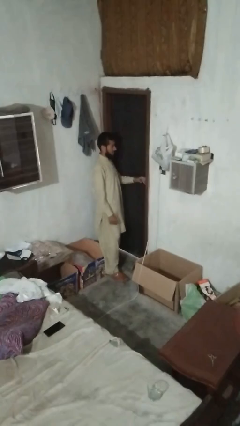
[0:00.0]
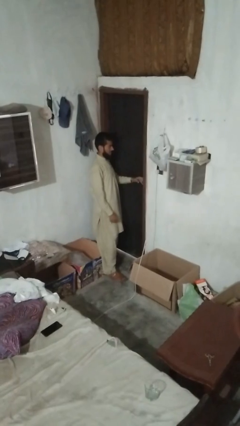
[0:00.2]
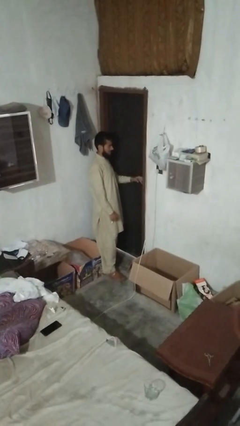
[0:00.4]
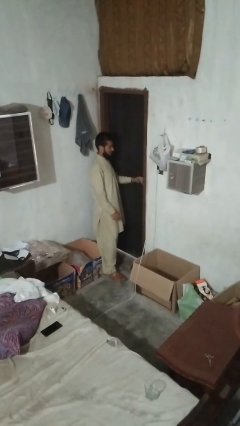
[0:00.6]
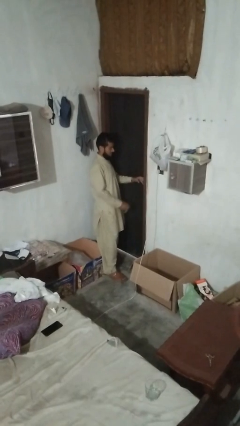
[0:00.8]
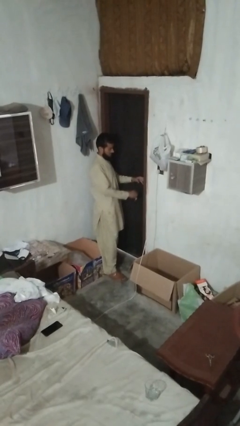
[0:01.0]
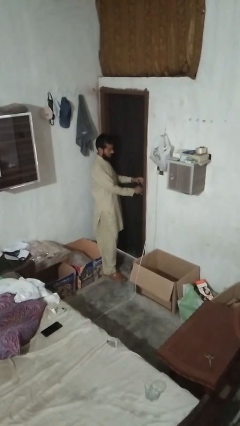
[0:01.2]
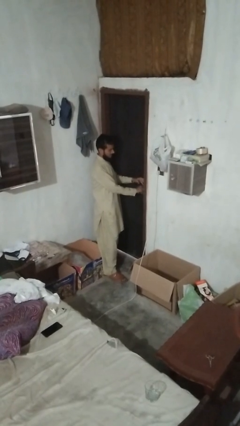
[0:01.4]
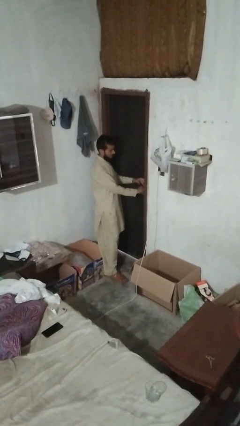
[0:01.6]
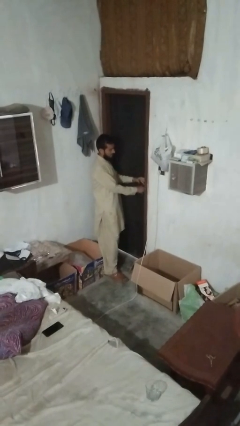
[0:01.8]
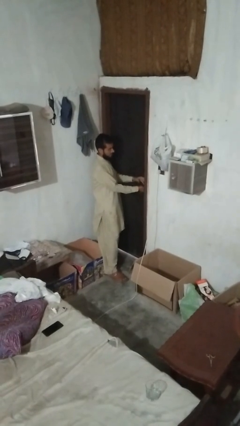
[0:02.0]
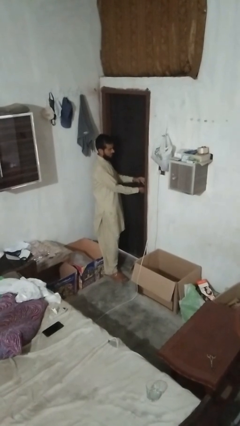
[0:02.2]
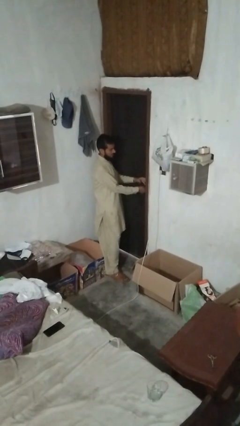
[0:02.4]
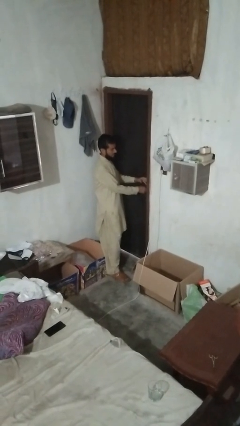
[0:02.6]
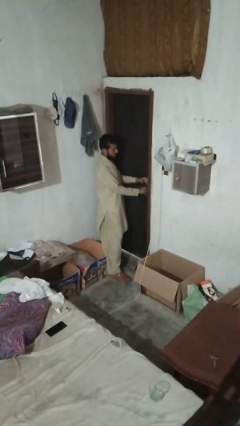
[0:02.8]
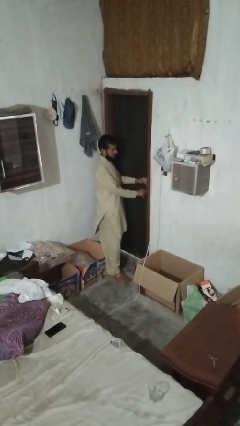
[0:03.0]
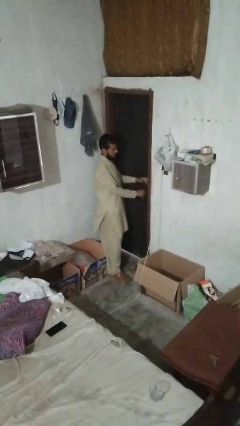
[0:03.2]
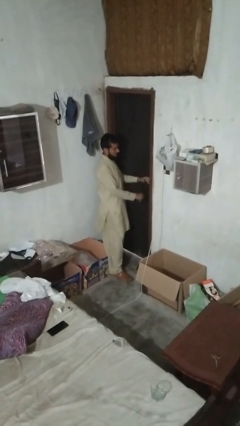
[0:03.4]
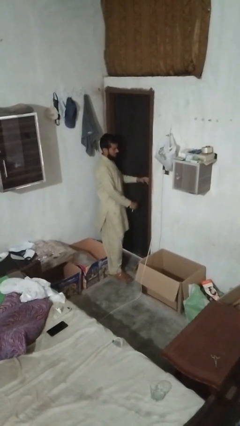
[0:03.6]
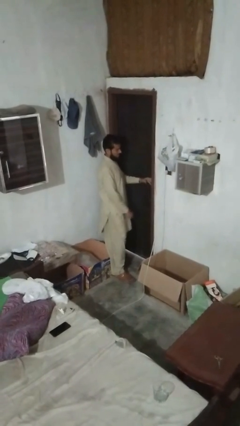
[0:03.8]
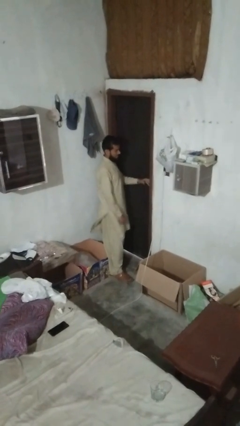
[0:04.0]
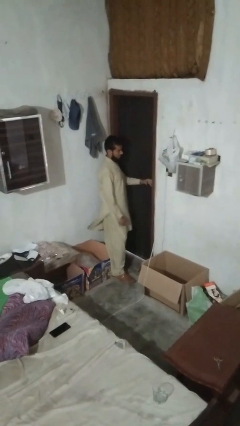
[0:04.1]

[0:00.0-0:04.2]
person locks door with keys

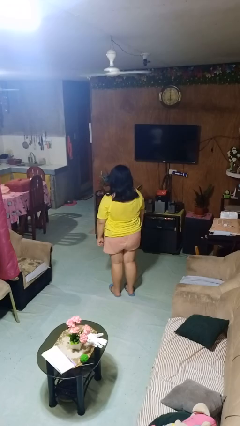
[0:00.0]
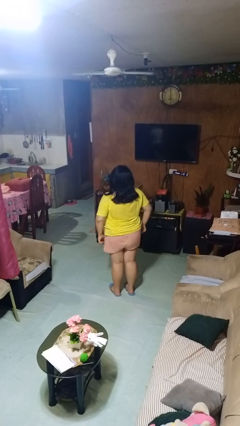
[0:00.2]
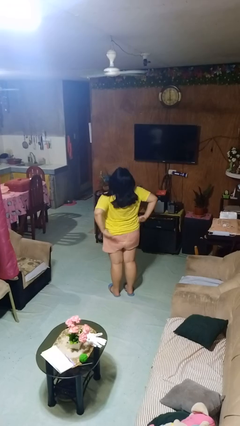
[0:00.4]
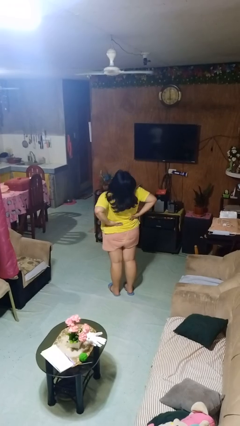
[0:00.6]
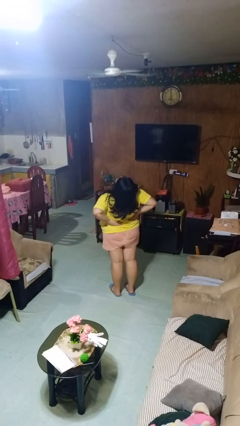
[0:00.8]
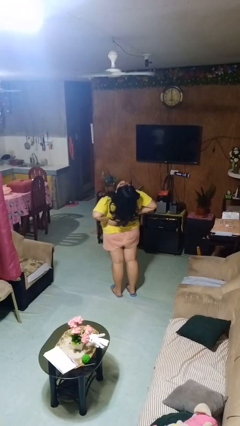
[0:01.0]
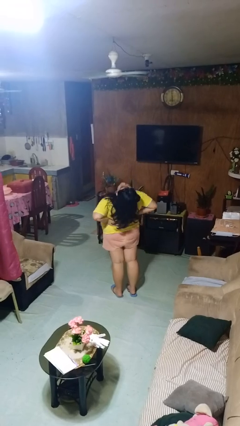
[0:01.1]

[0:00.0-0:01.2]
person stretches back

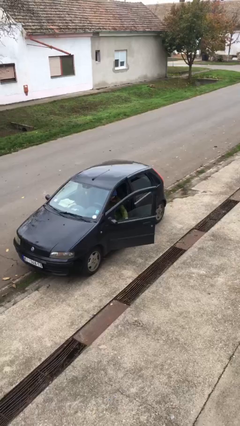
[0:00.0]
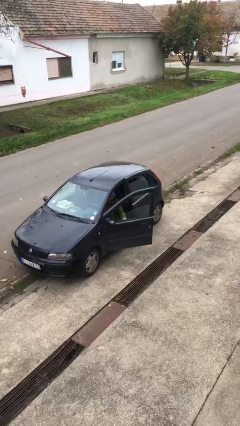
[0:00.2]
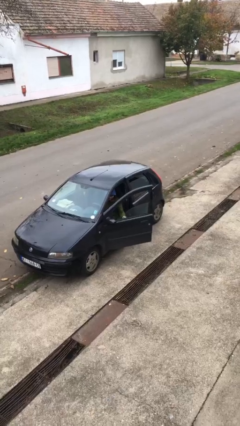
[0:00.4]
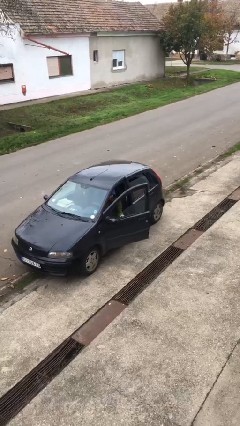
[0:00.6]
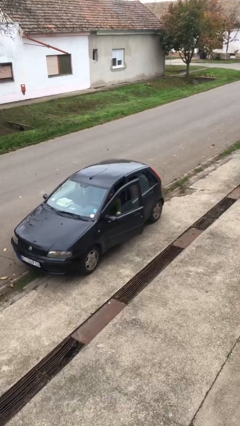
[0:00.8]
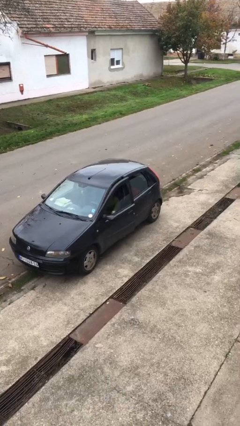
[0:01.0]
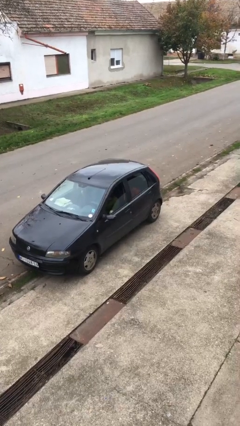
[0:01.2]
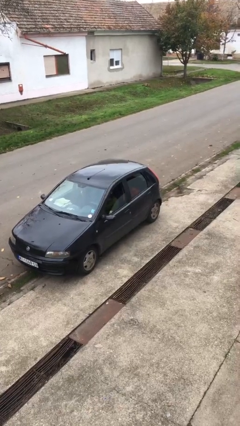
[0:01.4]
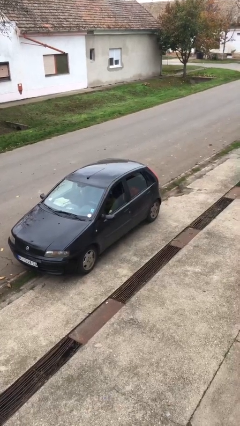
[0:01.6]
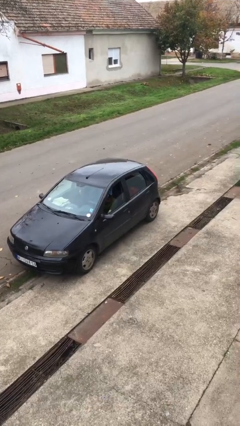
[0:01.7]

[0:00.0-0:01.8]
person closes car door

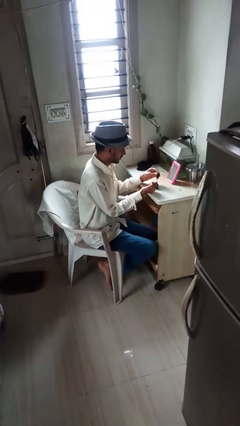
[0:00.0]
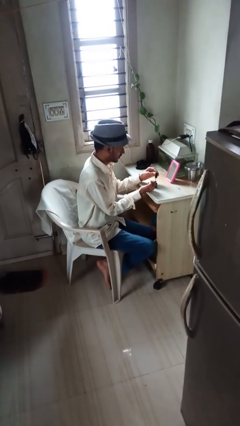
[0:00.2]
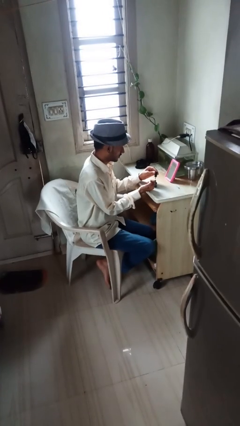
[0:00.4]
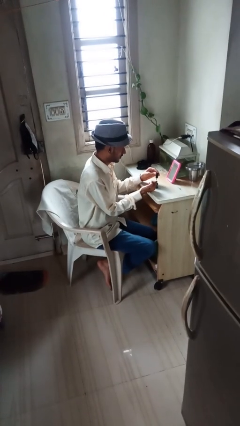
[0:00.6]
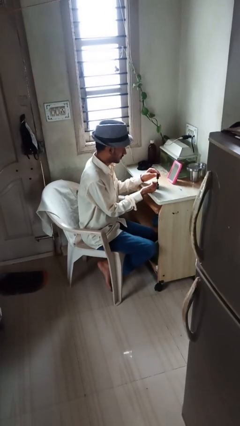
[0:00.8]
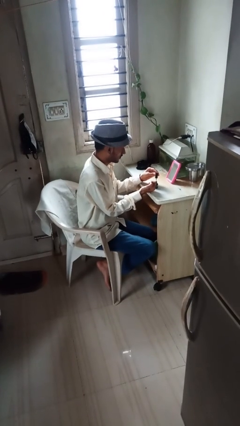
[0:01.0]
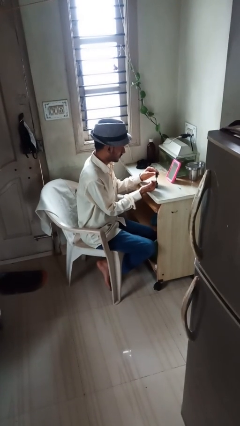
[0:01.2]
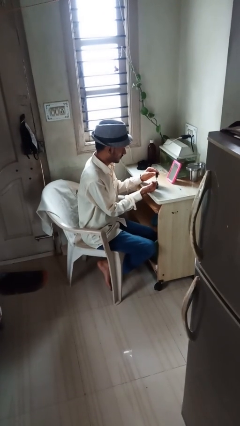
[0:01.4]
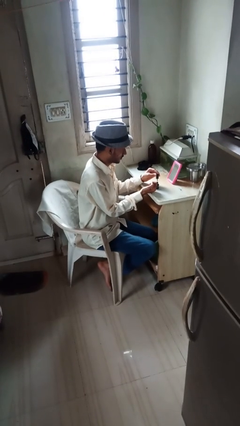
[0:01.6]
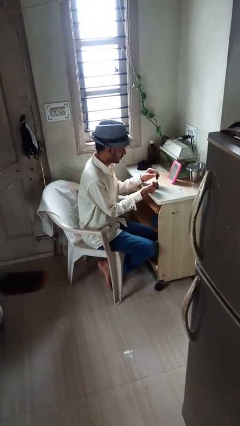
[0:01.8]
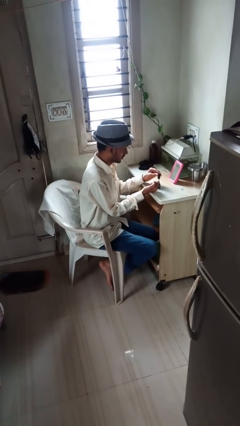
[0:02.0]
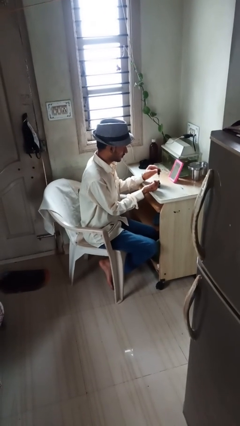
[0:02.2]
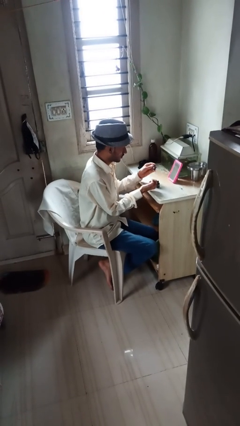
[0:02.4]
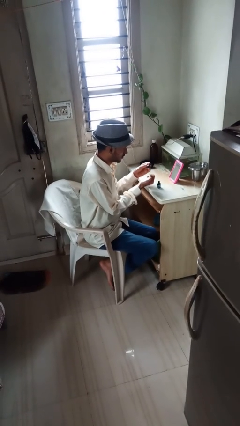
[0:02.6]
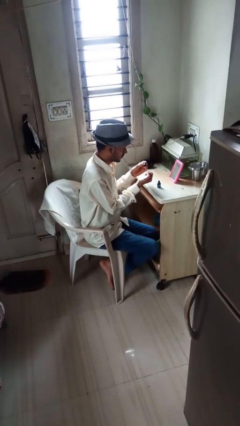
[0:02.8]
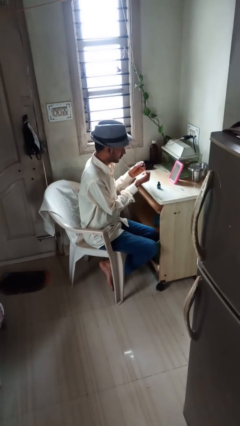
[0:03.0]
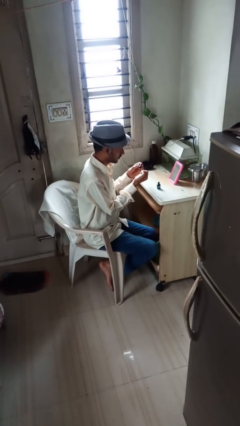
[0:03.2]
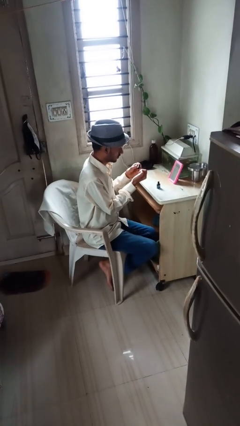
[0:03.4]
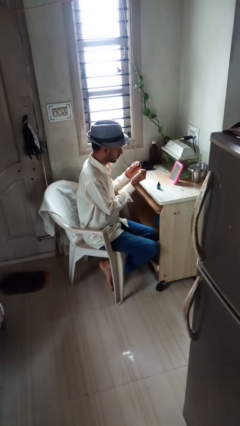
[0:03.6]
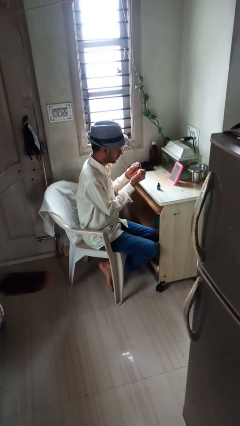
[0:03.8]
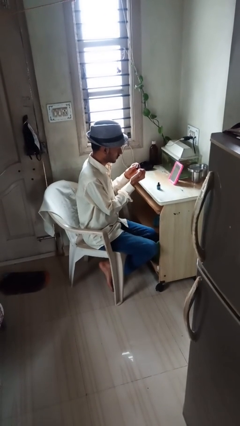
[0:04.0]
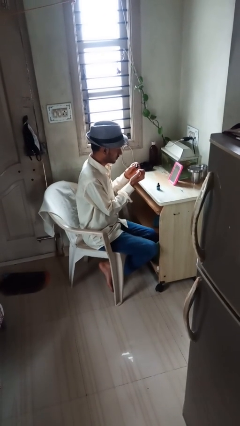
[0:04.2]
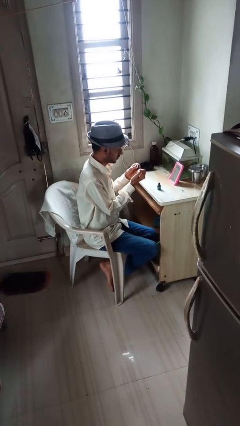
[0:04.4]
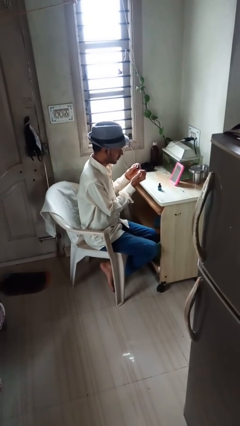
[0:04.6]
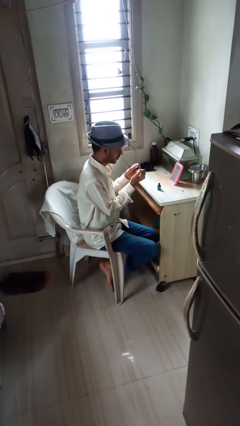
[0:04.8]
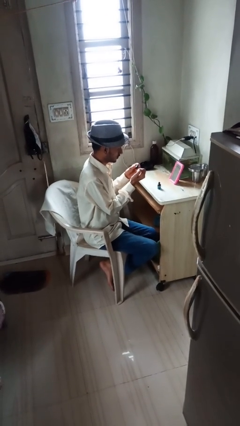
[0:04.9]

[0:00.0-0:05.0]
person paints fingernails

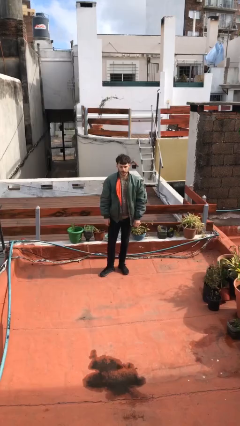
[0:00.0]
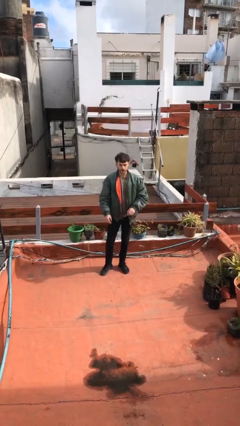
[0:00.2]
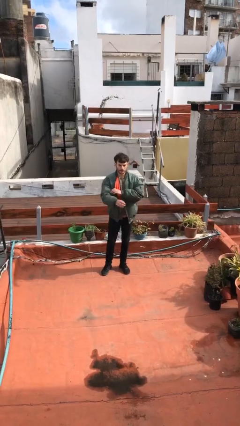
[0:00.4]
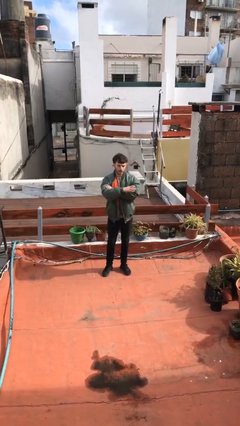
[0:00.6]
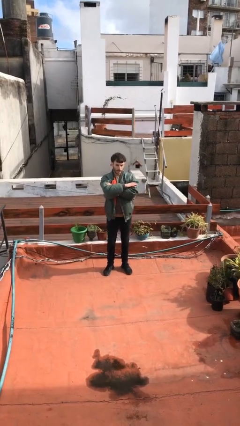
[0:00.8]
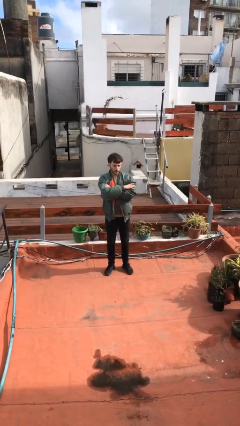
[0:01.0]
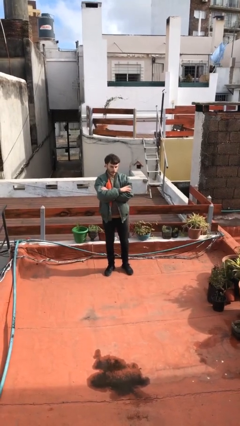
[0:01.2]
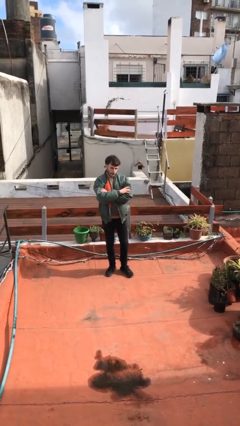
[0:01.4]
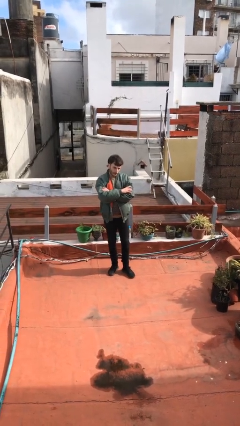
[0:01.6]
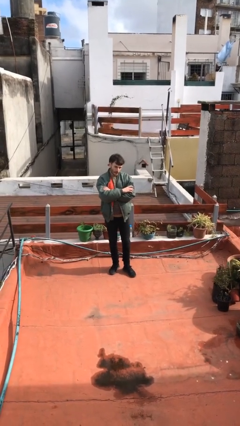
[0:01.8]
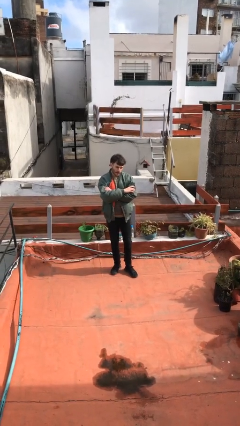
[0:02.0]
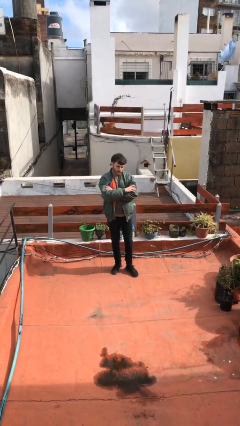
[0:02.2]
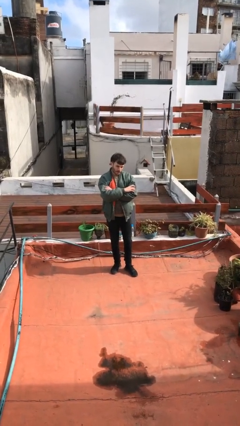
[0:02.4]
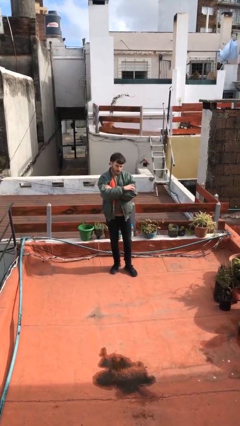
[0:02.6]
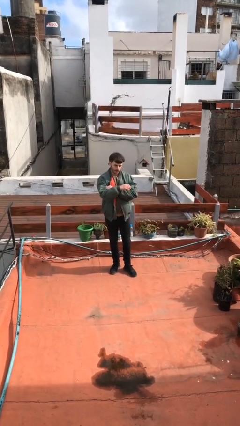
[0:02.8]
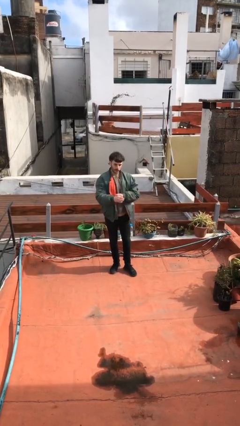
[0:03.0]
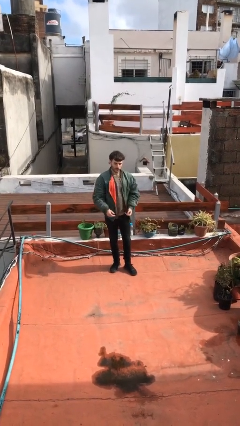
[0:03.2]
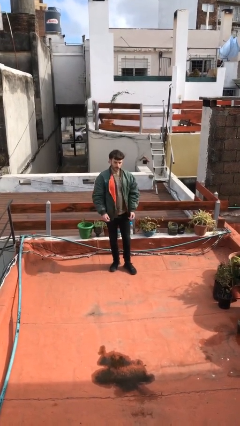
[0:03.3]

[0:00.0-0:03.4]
person crosses arms

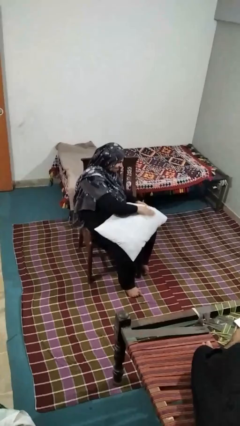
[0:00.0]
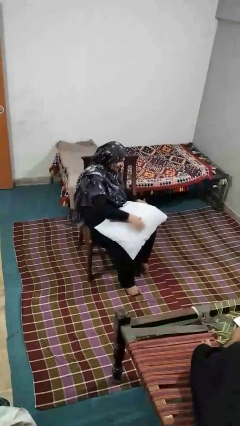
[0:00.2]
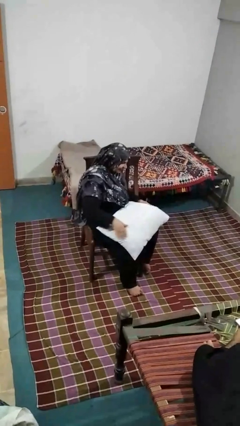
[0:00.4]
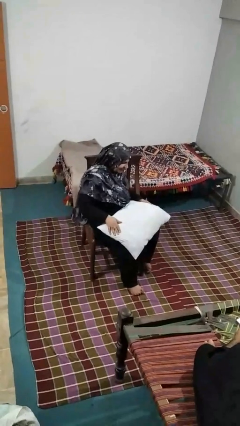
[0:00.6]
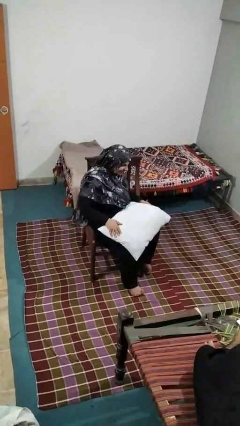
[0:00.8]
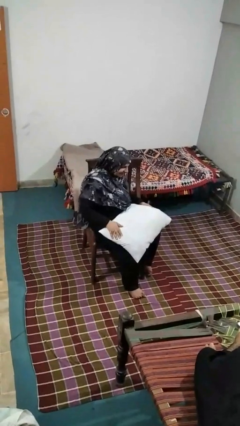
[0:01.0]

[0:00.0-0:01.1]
person waves hand over object

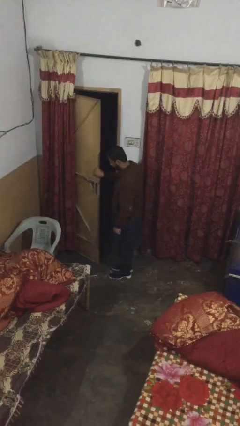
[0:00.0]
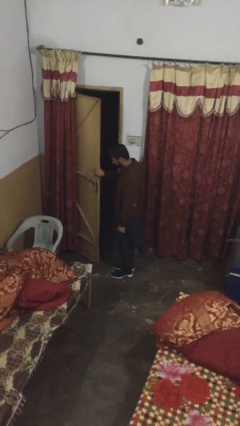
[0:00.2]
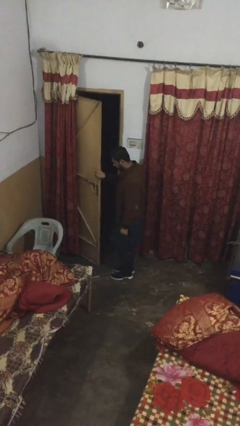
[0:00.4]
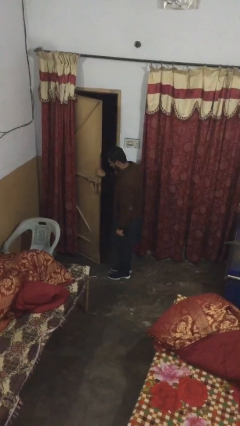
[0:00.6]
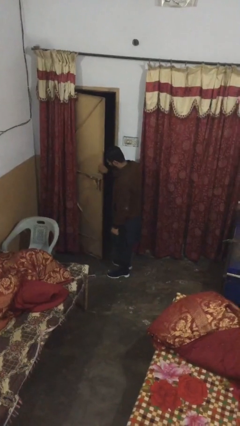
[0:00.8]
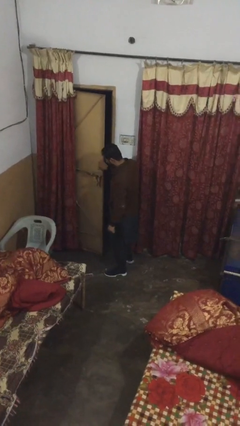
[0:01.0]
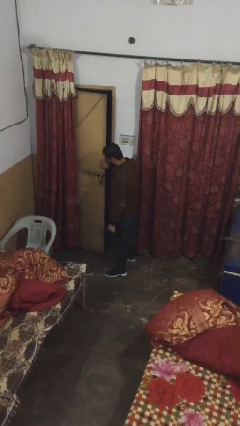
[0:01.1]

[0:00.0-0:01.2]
person closes facility door
